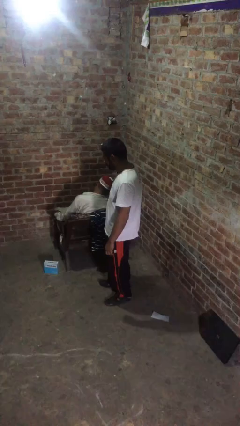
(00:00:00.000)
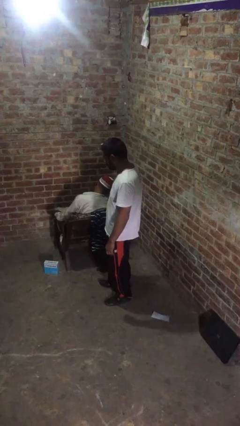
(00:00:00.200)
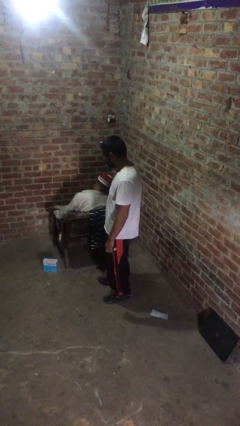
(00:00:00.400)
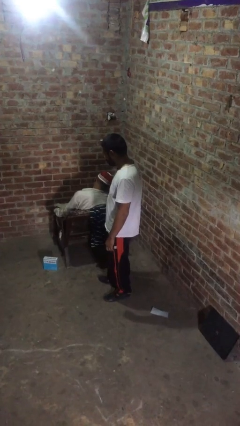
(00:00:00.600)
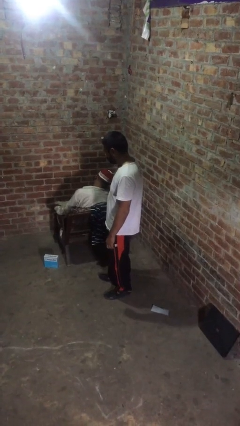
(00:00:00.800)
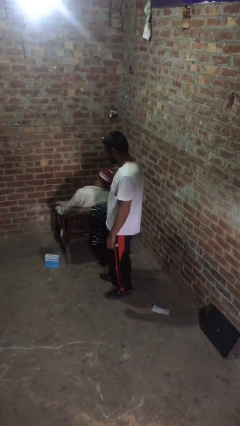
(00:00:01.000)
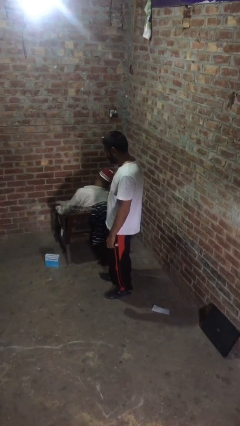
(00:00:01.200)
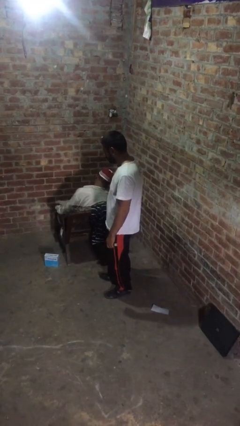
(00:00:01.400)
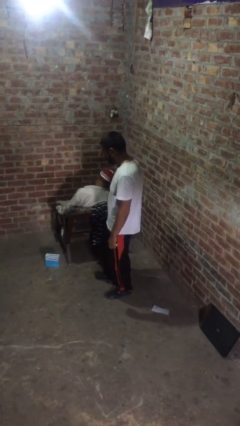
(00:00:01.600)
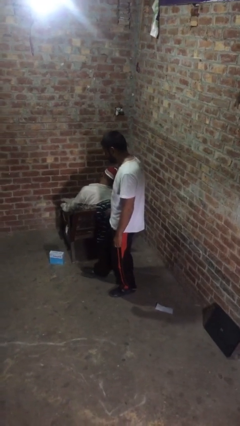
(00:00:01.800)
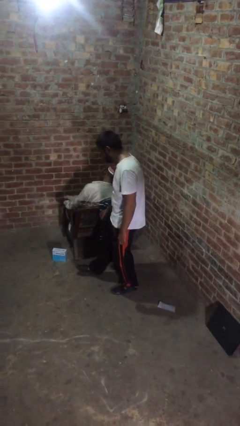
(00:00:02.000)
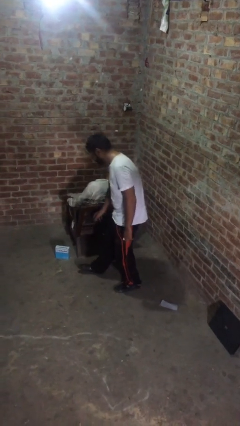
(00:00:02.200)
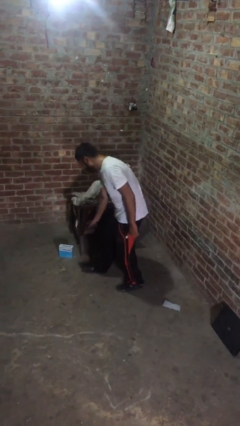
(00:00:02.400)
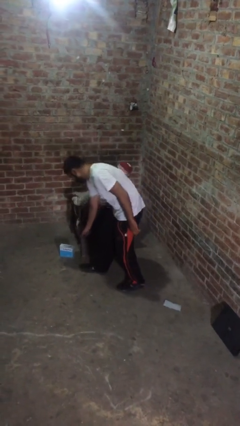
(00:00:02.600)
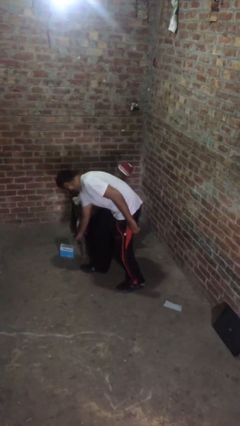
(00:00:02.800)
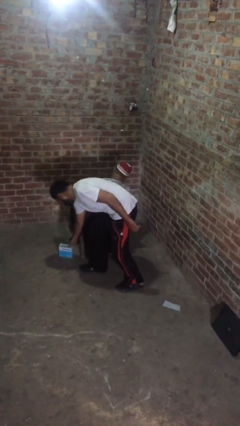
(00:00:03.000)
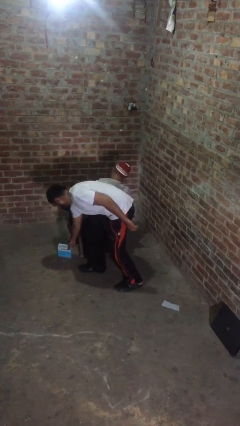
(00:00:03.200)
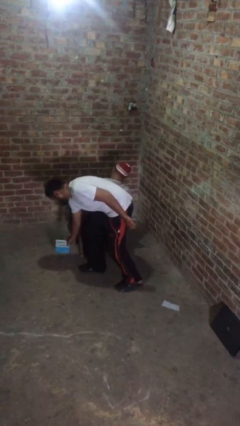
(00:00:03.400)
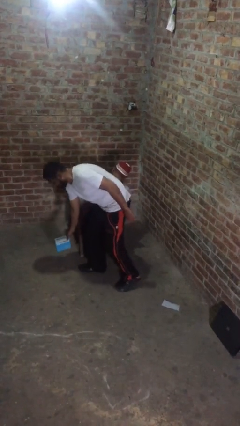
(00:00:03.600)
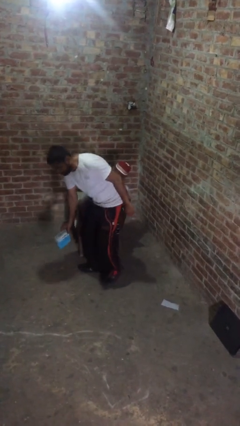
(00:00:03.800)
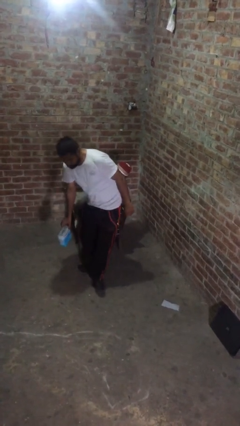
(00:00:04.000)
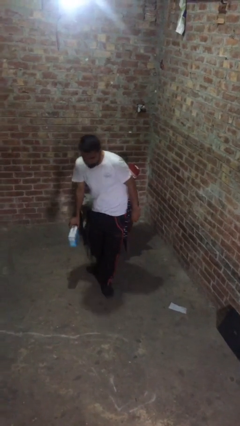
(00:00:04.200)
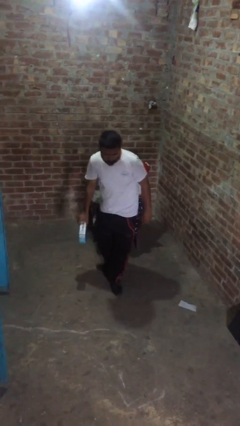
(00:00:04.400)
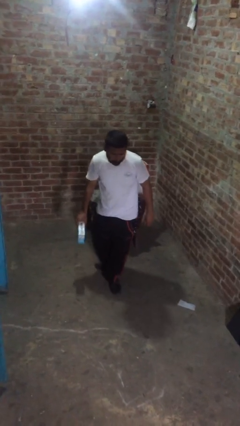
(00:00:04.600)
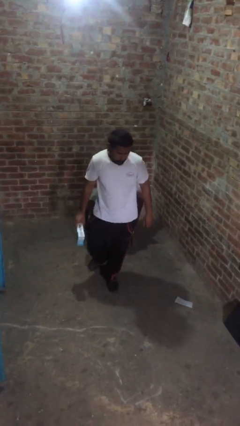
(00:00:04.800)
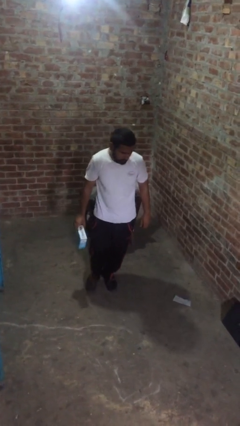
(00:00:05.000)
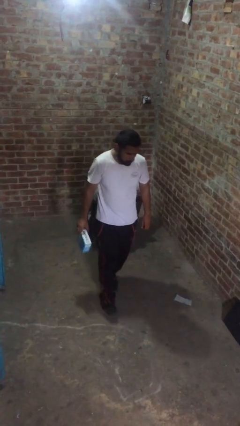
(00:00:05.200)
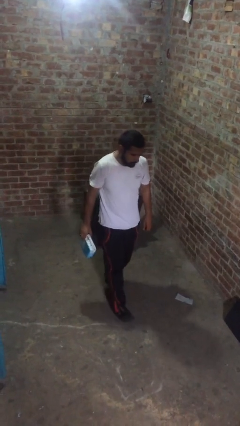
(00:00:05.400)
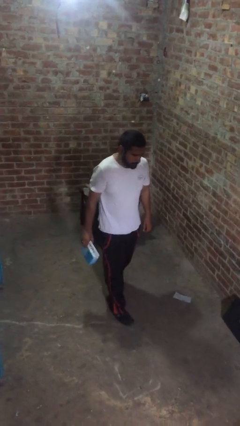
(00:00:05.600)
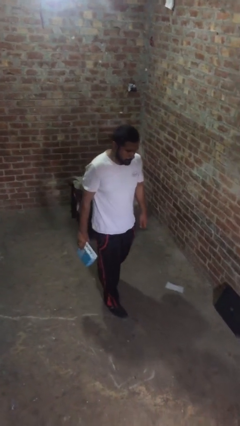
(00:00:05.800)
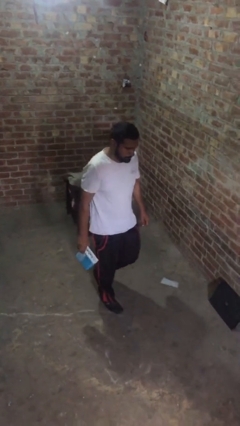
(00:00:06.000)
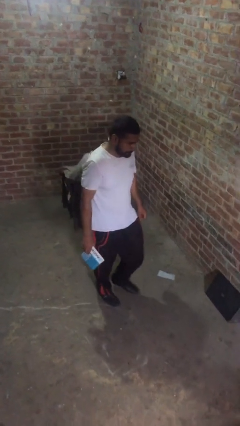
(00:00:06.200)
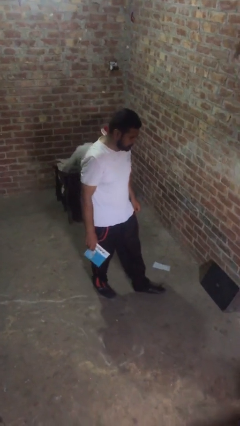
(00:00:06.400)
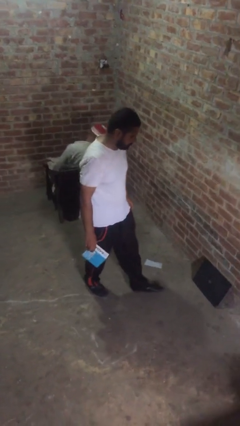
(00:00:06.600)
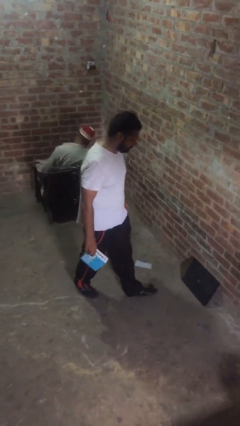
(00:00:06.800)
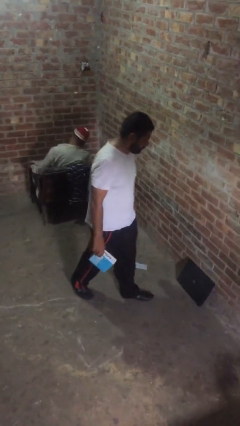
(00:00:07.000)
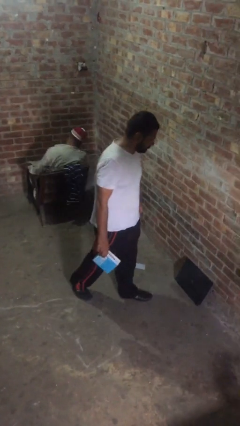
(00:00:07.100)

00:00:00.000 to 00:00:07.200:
person steals object from person

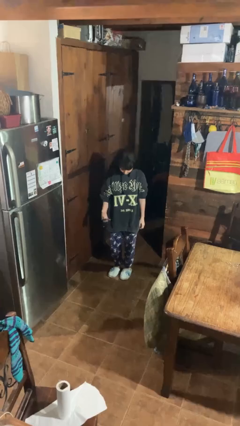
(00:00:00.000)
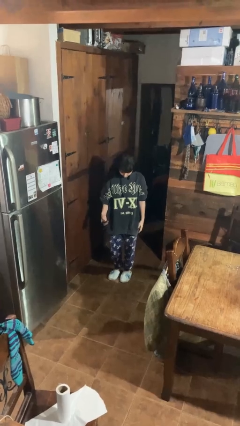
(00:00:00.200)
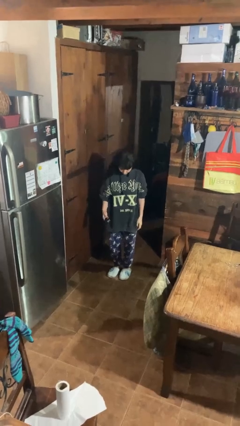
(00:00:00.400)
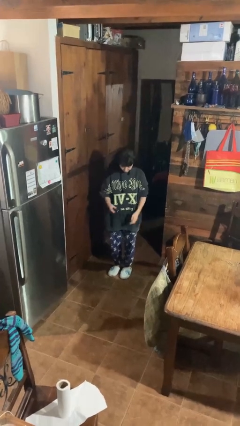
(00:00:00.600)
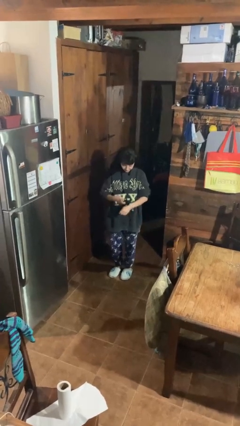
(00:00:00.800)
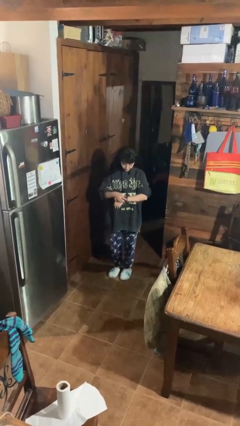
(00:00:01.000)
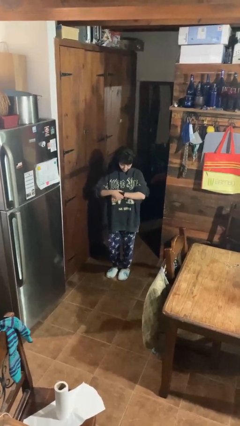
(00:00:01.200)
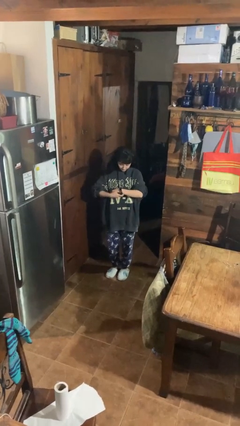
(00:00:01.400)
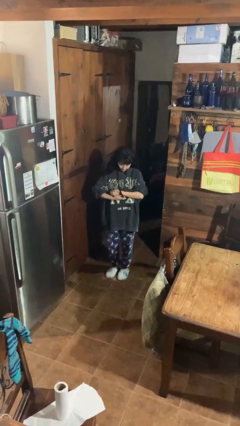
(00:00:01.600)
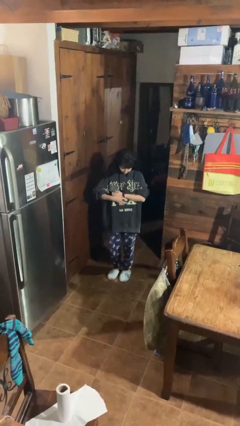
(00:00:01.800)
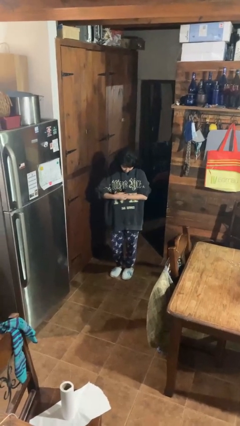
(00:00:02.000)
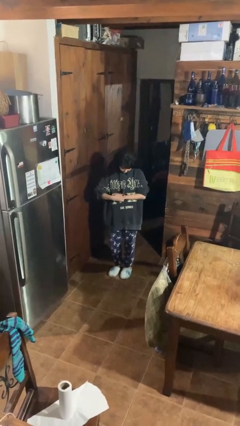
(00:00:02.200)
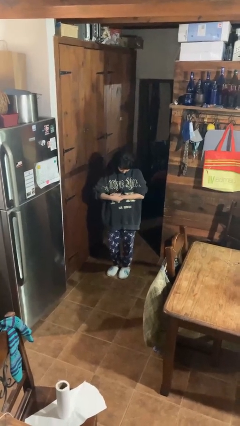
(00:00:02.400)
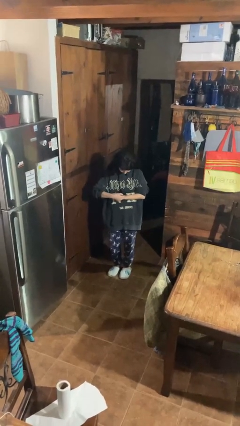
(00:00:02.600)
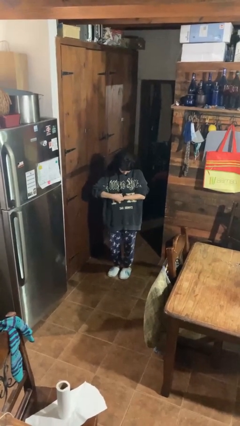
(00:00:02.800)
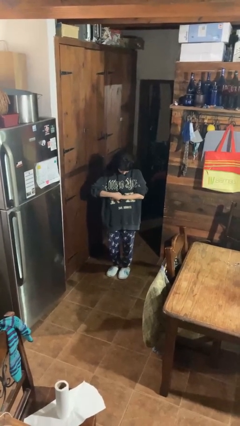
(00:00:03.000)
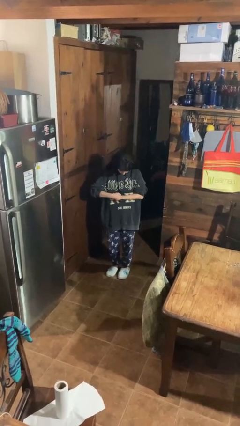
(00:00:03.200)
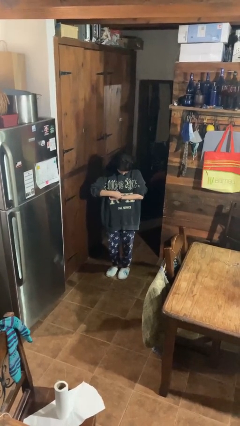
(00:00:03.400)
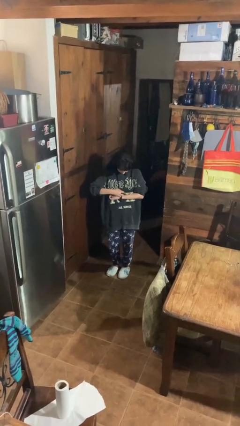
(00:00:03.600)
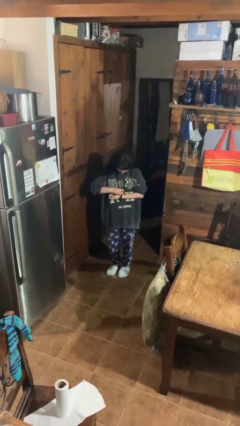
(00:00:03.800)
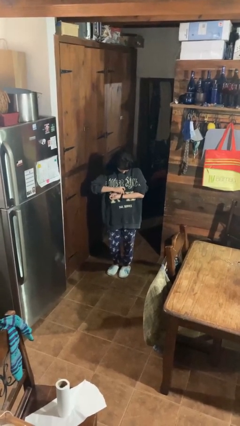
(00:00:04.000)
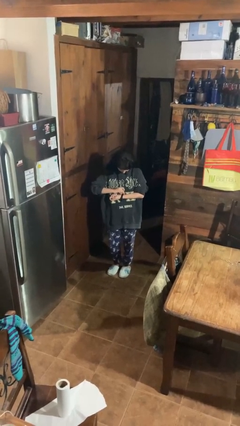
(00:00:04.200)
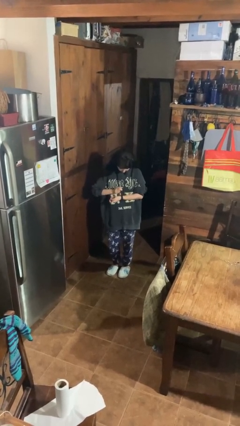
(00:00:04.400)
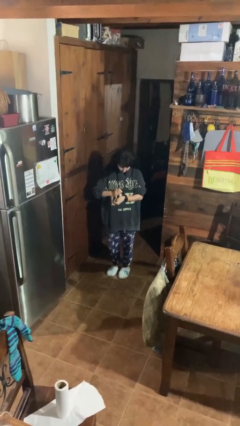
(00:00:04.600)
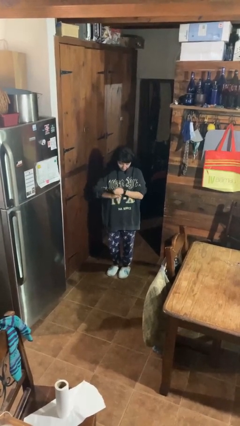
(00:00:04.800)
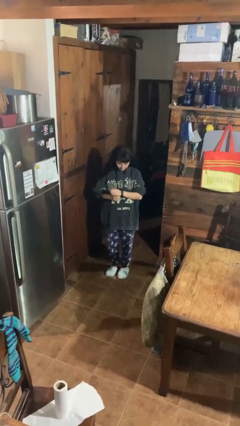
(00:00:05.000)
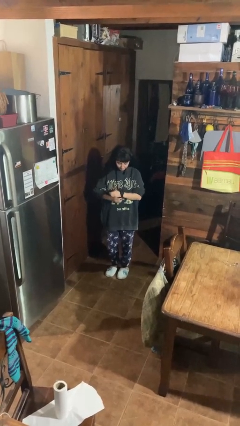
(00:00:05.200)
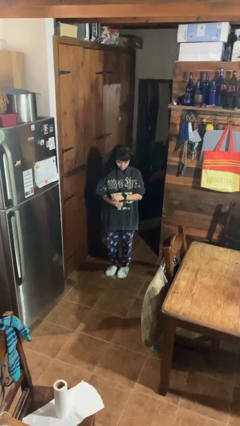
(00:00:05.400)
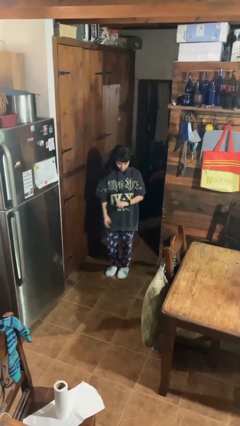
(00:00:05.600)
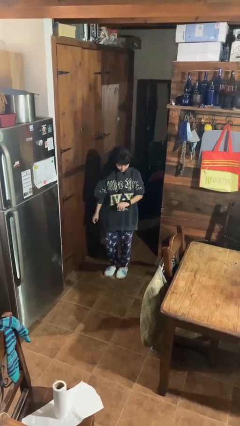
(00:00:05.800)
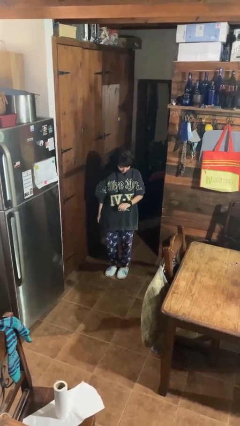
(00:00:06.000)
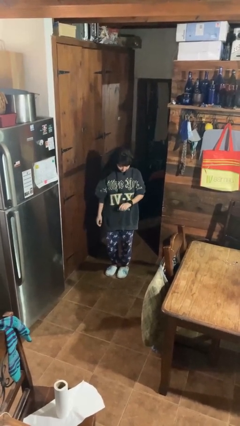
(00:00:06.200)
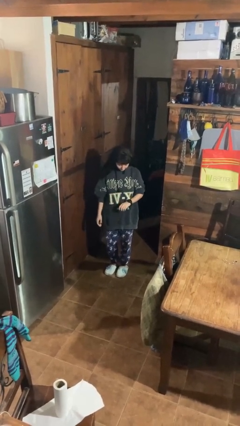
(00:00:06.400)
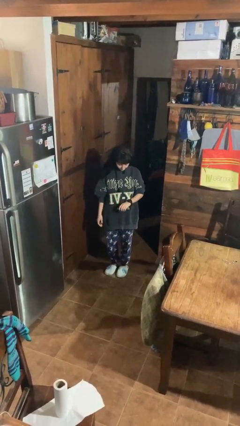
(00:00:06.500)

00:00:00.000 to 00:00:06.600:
person puts on wristwatch

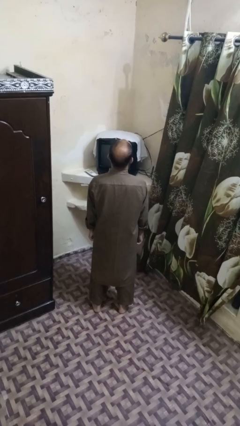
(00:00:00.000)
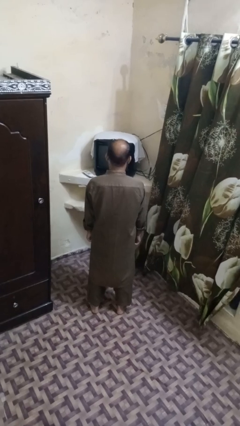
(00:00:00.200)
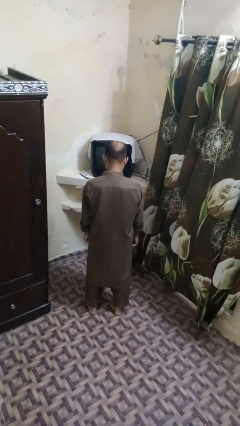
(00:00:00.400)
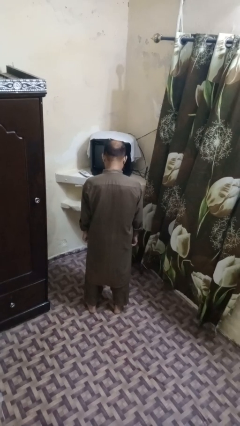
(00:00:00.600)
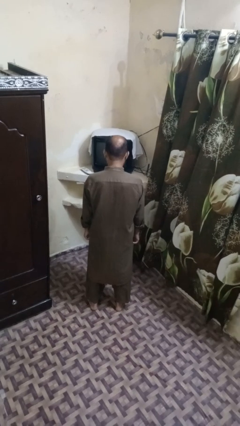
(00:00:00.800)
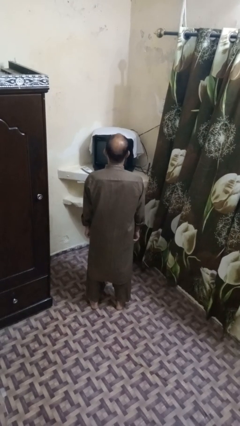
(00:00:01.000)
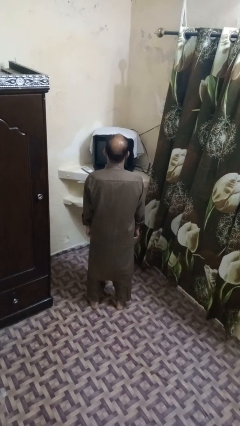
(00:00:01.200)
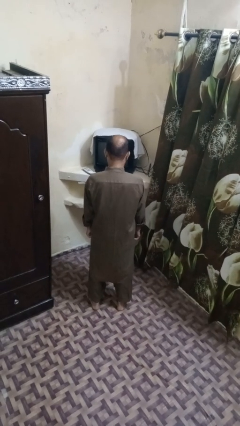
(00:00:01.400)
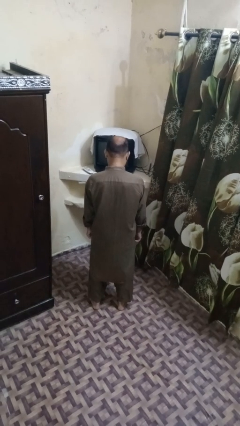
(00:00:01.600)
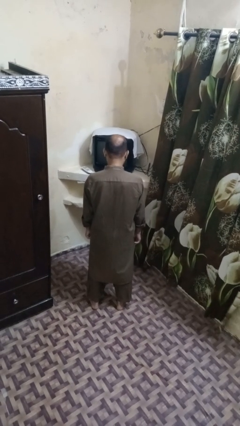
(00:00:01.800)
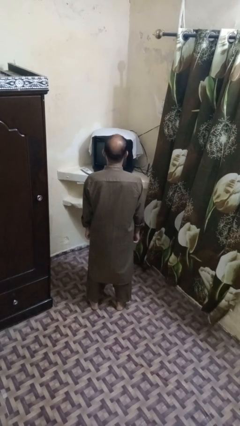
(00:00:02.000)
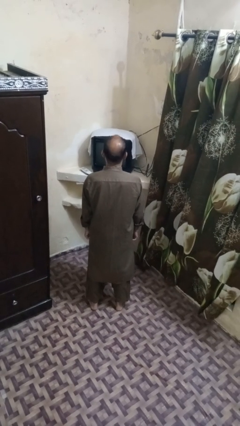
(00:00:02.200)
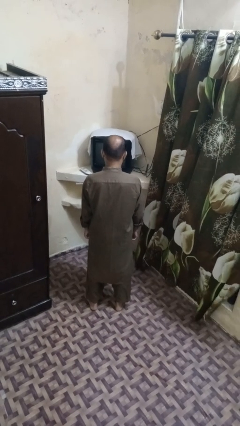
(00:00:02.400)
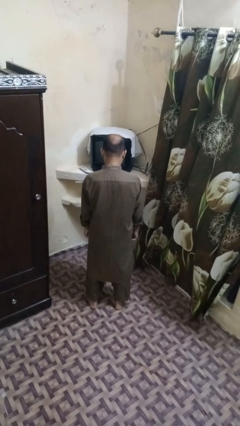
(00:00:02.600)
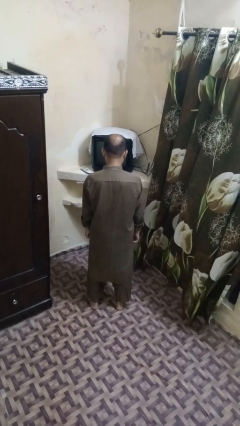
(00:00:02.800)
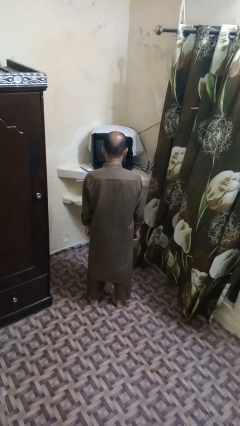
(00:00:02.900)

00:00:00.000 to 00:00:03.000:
person nods head

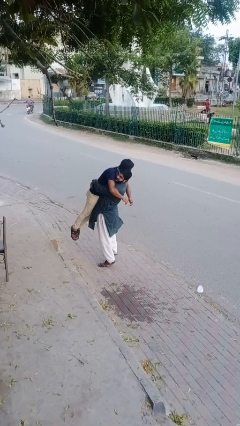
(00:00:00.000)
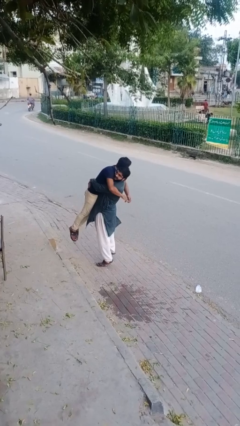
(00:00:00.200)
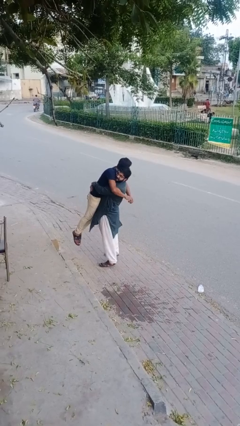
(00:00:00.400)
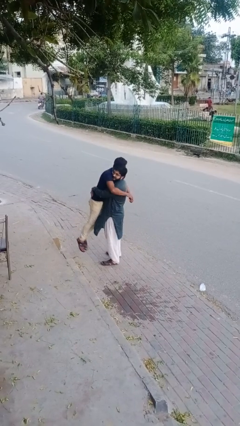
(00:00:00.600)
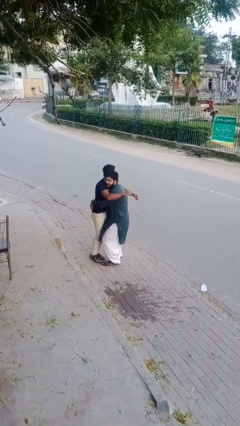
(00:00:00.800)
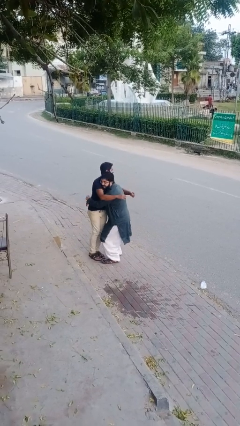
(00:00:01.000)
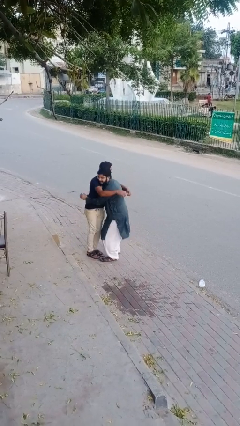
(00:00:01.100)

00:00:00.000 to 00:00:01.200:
person puts down person
